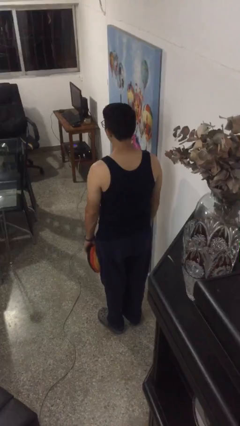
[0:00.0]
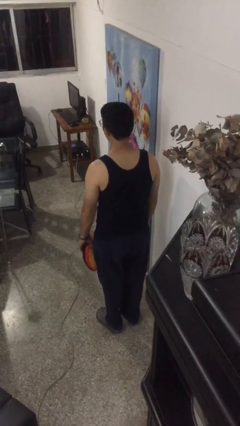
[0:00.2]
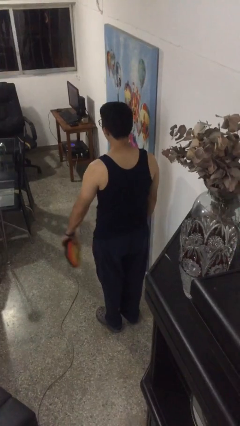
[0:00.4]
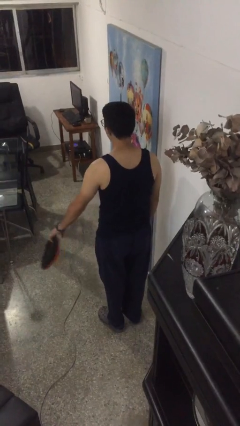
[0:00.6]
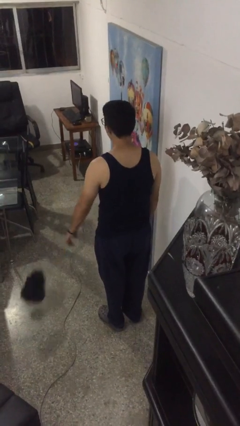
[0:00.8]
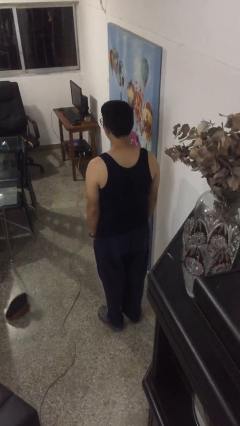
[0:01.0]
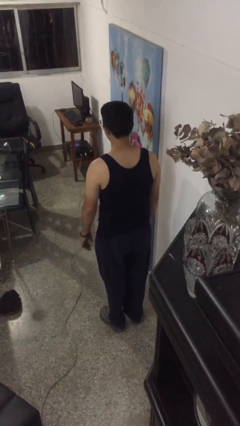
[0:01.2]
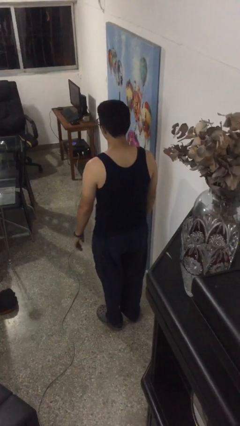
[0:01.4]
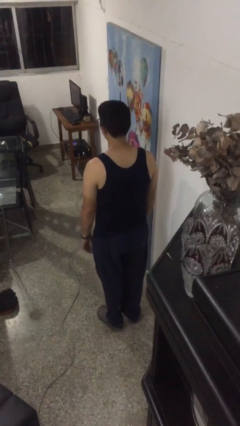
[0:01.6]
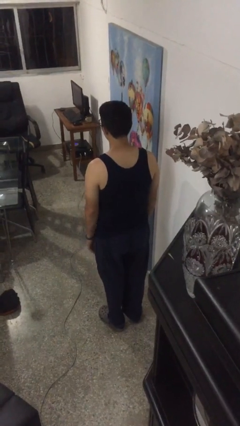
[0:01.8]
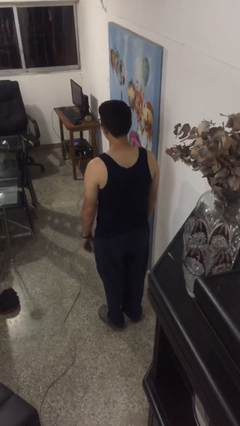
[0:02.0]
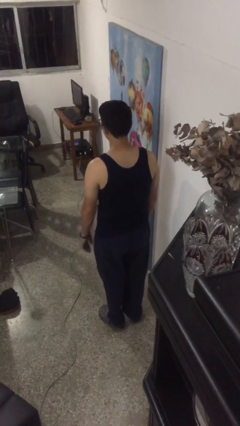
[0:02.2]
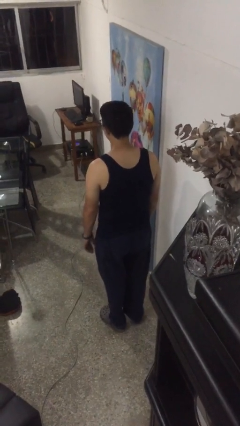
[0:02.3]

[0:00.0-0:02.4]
person throws object to ground

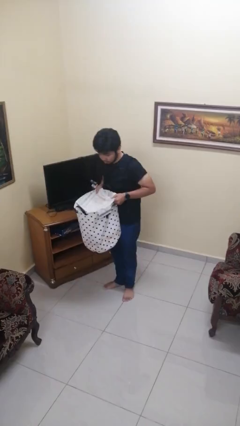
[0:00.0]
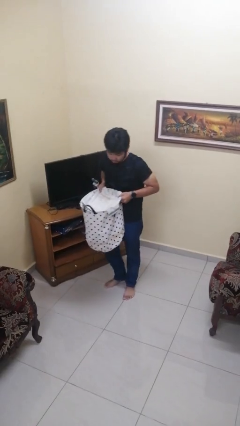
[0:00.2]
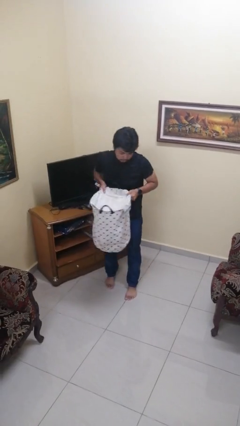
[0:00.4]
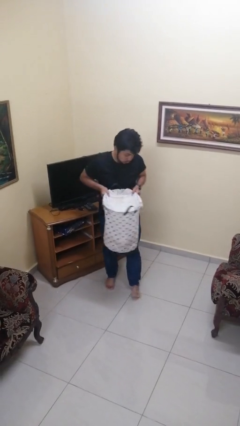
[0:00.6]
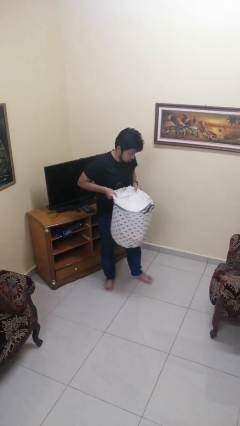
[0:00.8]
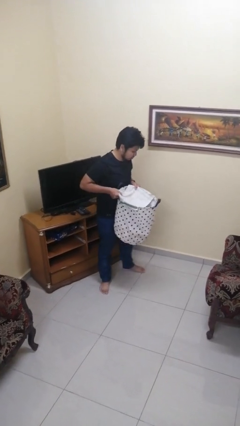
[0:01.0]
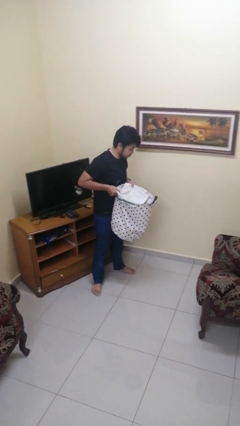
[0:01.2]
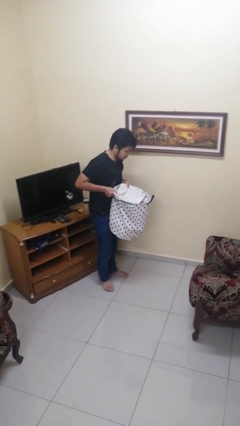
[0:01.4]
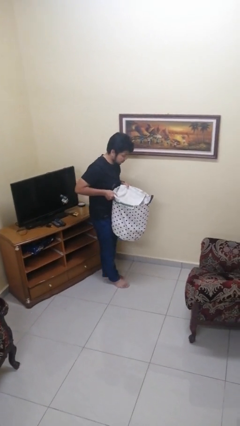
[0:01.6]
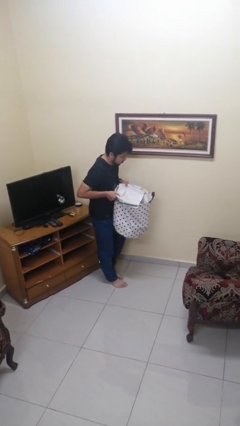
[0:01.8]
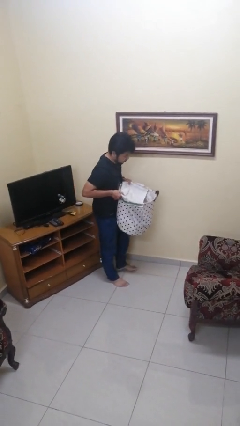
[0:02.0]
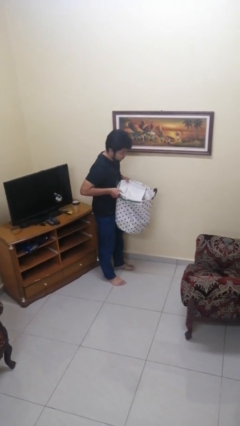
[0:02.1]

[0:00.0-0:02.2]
person carries laundry basket

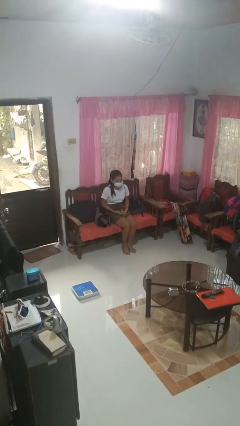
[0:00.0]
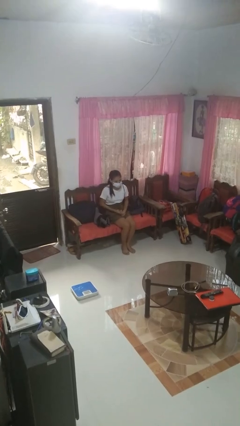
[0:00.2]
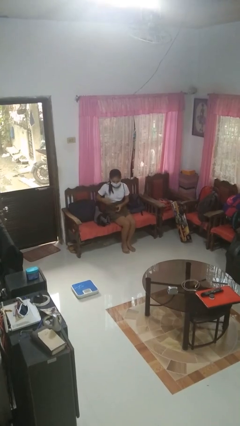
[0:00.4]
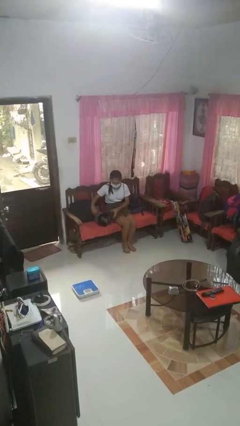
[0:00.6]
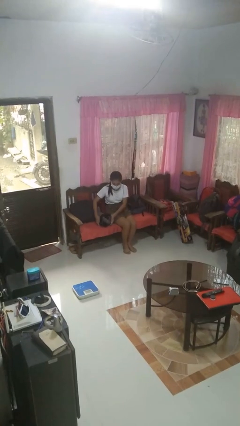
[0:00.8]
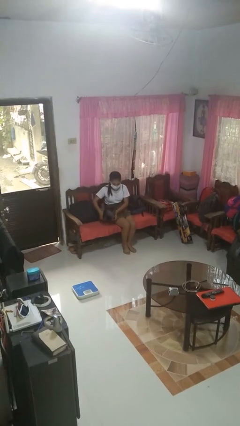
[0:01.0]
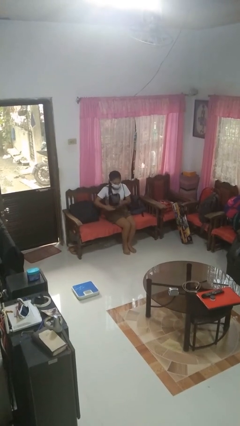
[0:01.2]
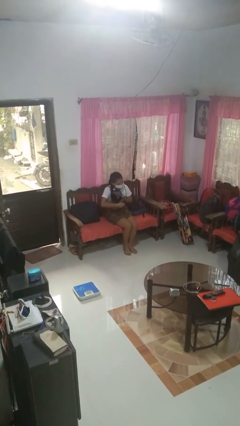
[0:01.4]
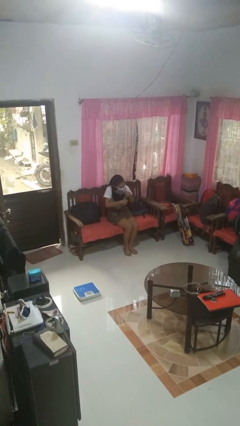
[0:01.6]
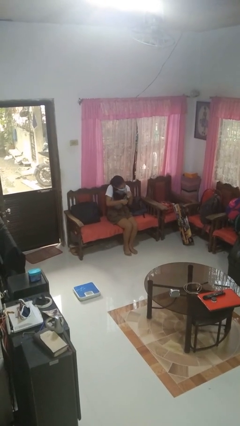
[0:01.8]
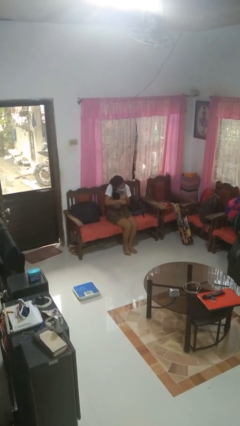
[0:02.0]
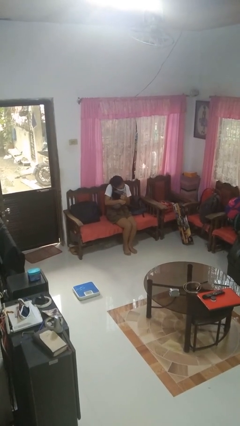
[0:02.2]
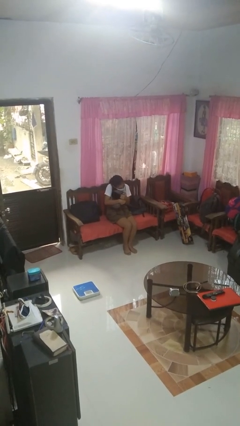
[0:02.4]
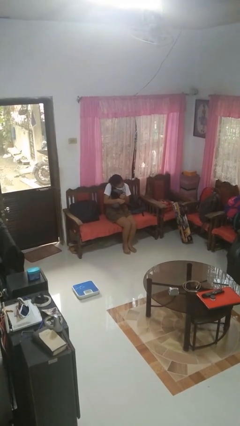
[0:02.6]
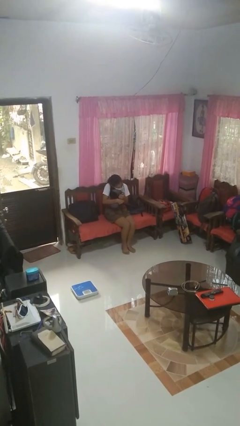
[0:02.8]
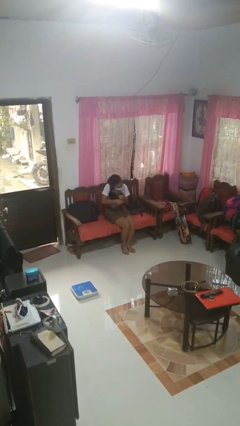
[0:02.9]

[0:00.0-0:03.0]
person hugs stuffed animal

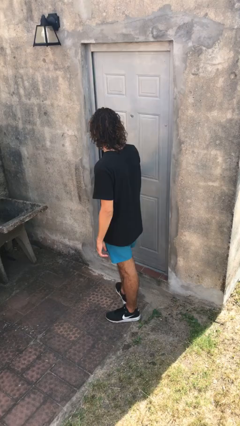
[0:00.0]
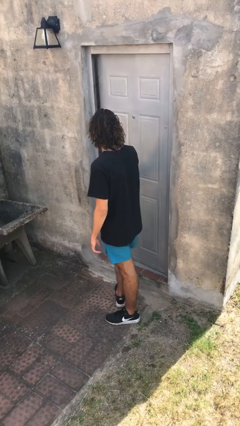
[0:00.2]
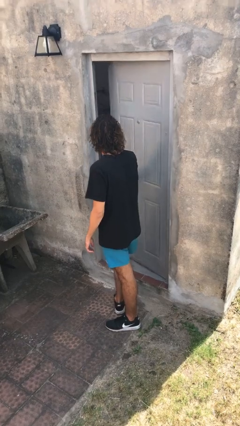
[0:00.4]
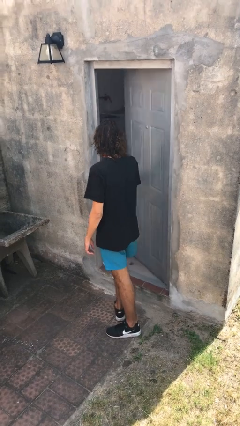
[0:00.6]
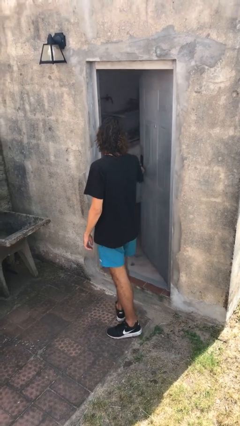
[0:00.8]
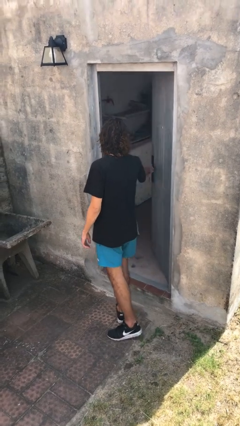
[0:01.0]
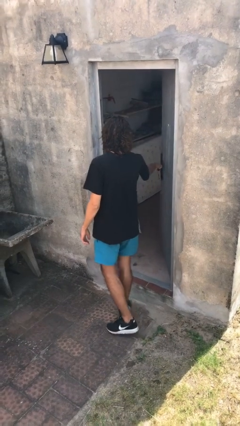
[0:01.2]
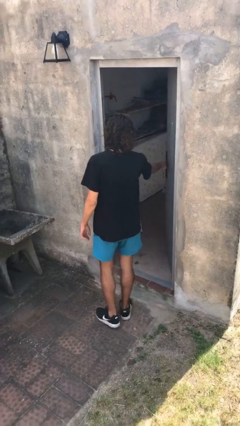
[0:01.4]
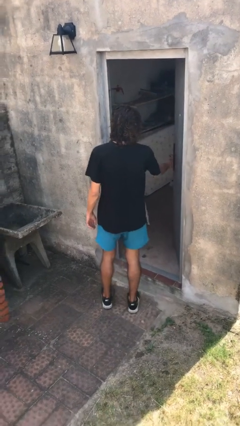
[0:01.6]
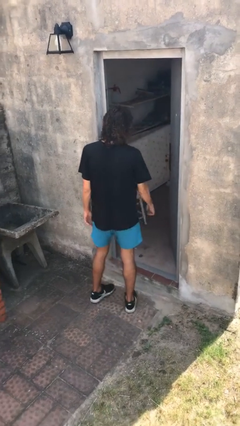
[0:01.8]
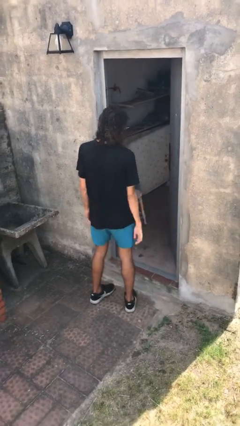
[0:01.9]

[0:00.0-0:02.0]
person opens facility door

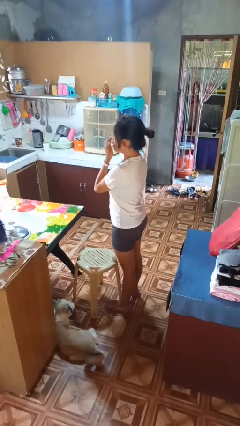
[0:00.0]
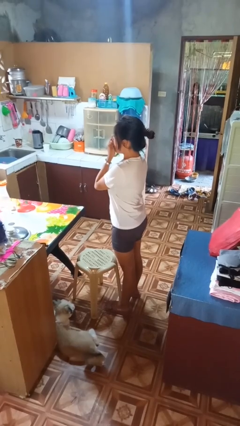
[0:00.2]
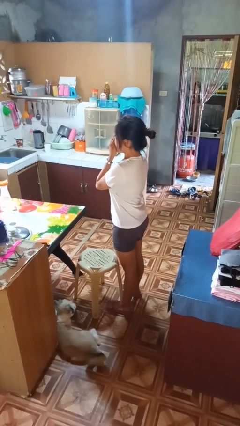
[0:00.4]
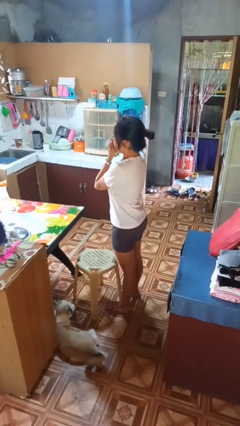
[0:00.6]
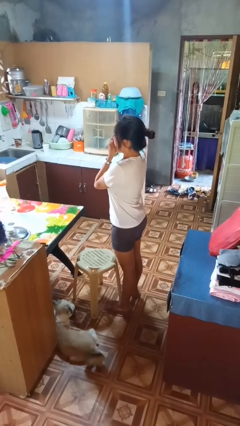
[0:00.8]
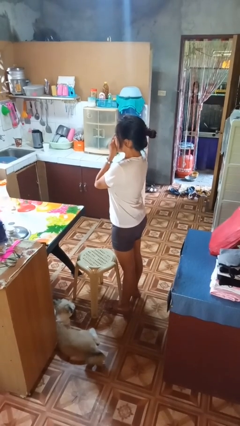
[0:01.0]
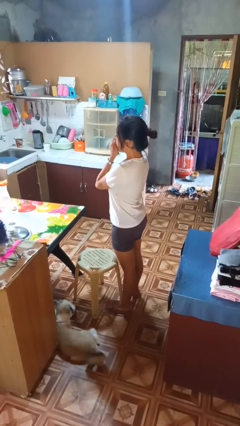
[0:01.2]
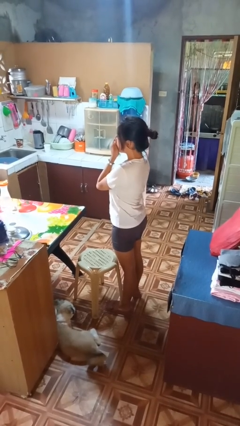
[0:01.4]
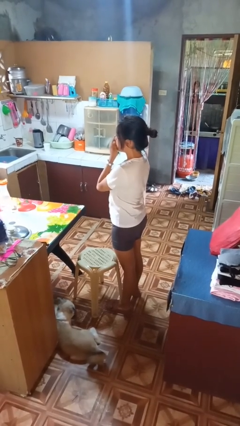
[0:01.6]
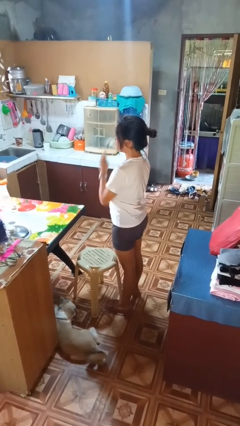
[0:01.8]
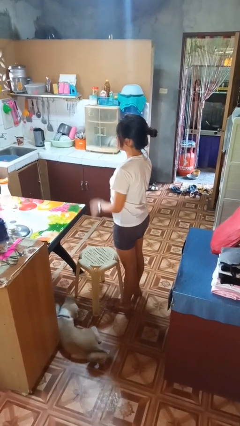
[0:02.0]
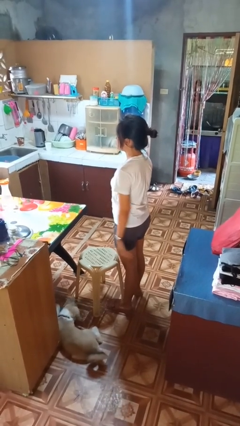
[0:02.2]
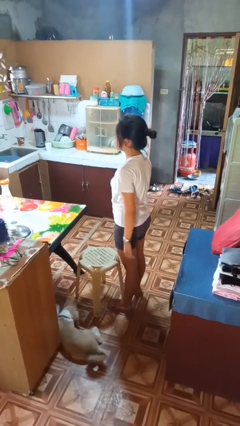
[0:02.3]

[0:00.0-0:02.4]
person yawns

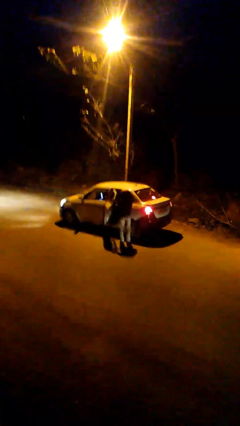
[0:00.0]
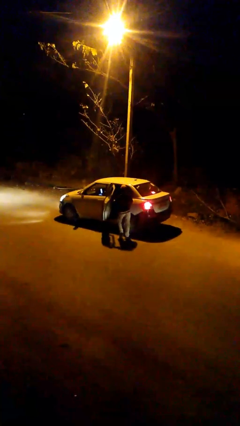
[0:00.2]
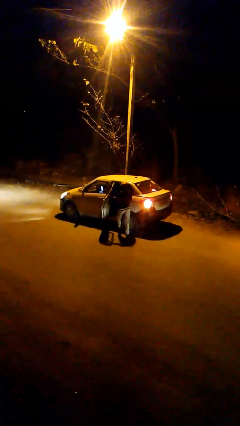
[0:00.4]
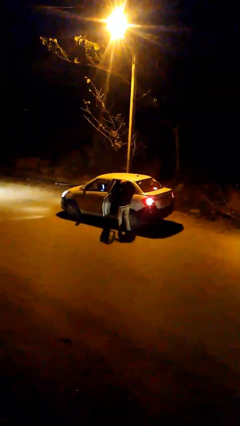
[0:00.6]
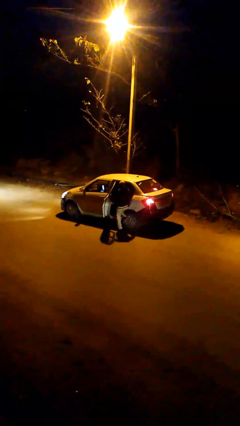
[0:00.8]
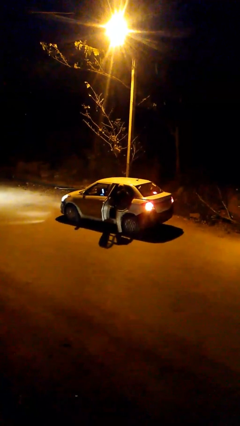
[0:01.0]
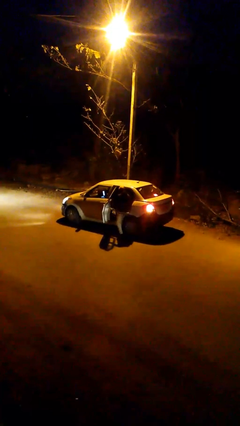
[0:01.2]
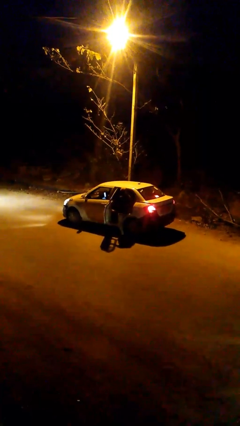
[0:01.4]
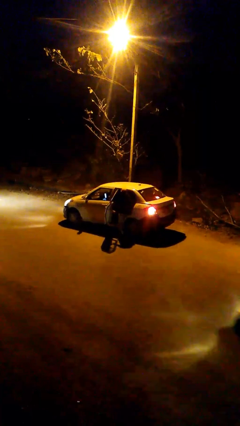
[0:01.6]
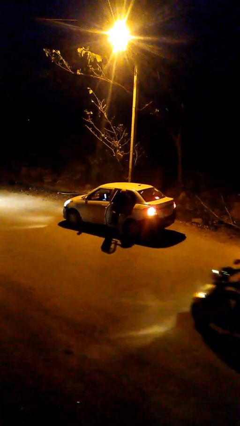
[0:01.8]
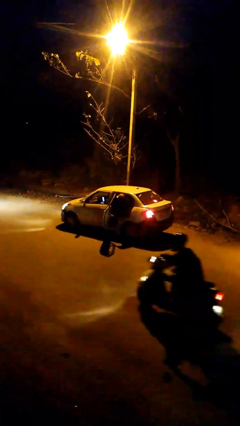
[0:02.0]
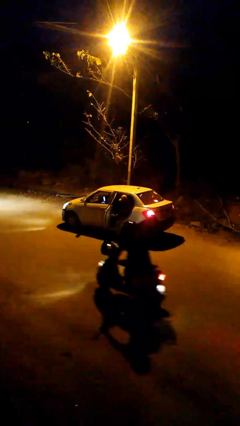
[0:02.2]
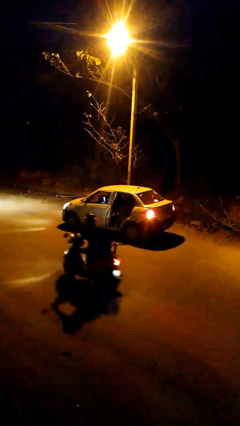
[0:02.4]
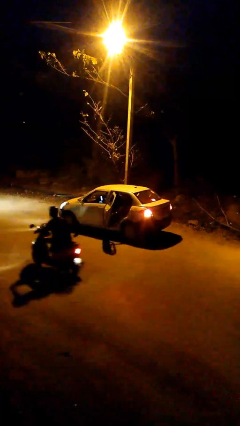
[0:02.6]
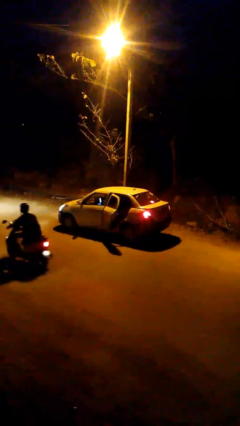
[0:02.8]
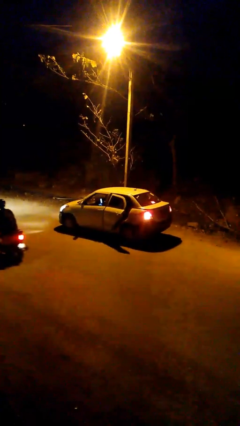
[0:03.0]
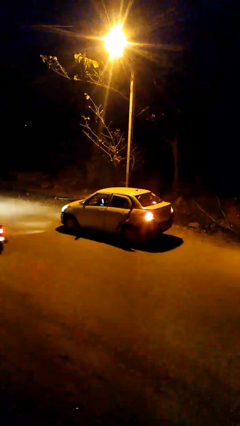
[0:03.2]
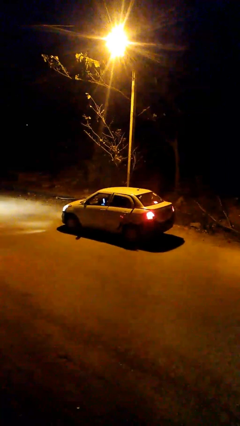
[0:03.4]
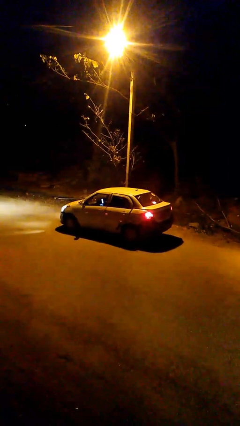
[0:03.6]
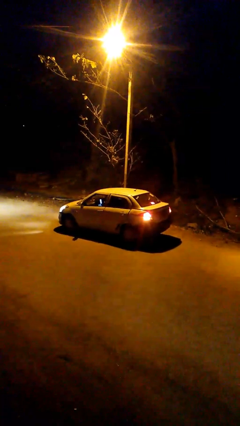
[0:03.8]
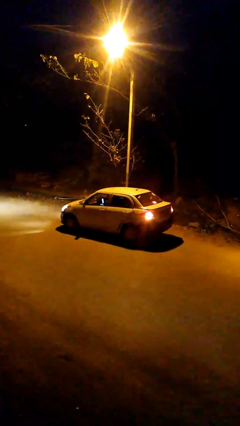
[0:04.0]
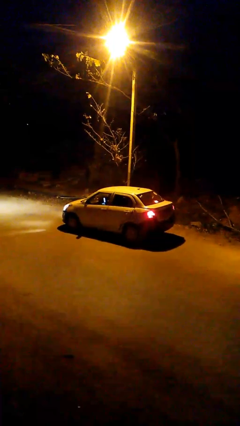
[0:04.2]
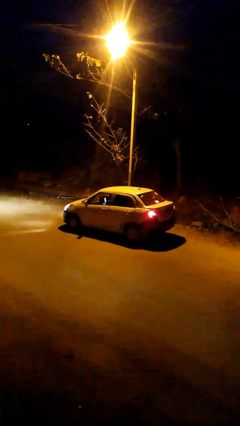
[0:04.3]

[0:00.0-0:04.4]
car picks up person

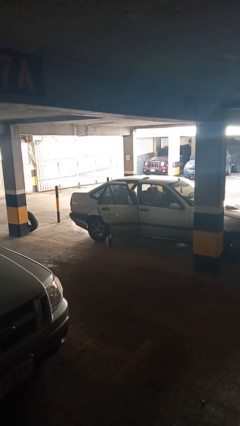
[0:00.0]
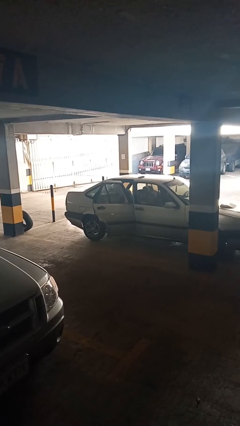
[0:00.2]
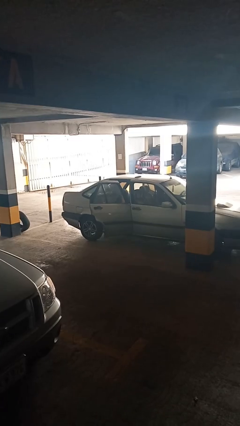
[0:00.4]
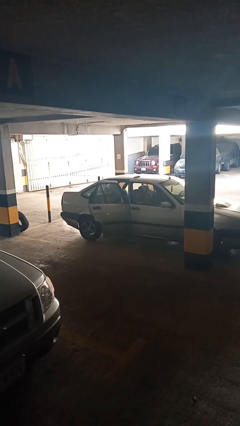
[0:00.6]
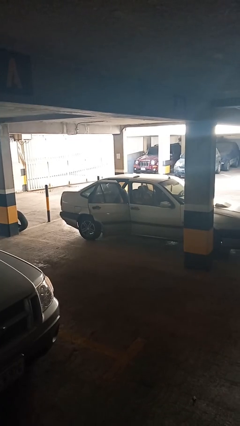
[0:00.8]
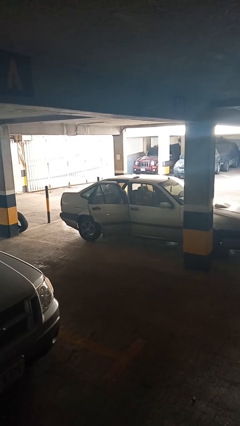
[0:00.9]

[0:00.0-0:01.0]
person enters car
